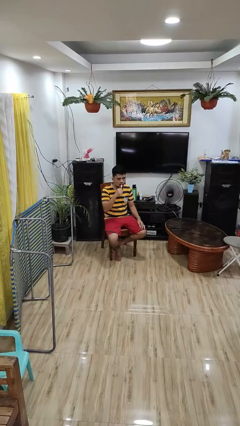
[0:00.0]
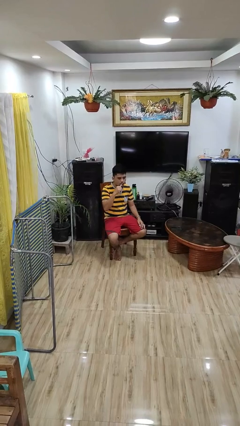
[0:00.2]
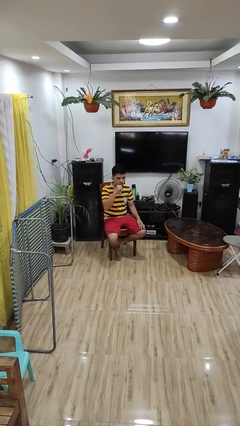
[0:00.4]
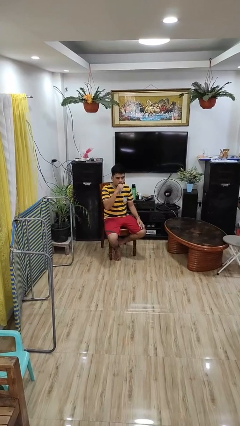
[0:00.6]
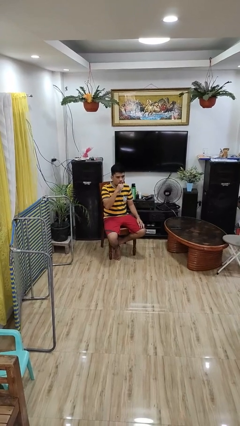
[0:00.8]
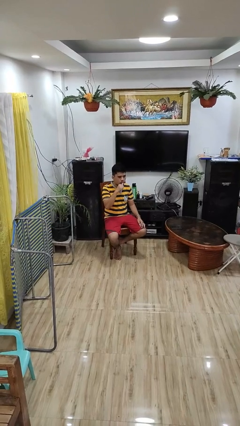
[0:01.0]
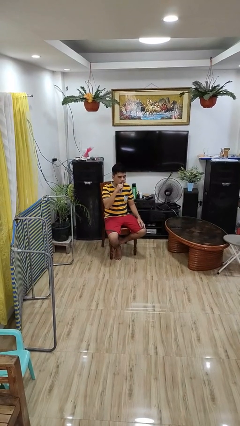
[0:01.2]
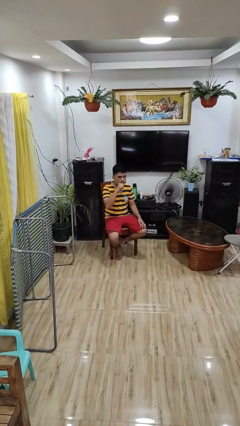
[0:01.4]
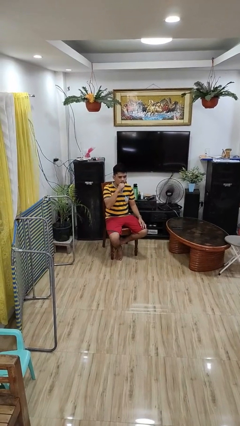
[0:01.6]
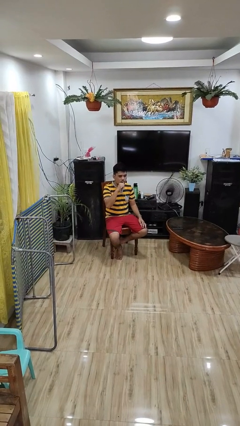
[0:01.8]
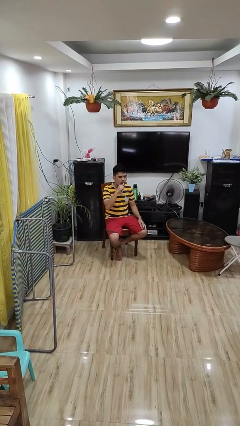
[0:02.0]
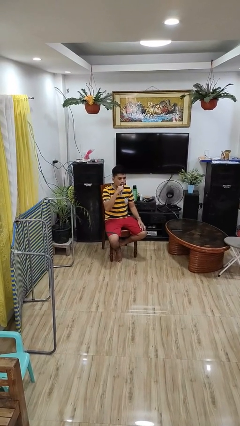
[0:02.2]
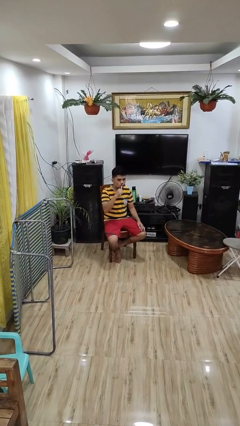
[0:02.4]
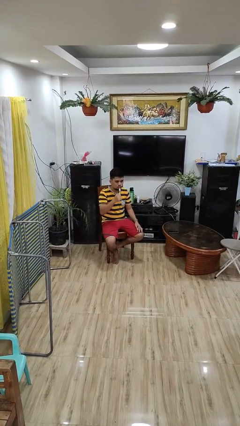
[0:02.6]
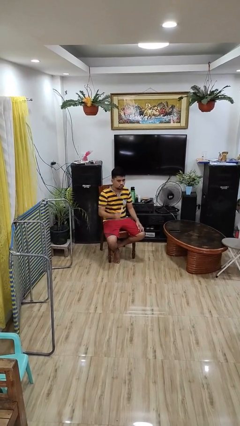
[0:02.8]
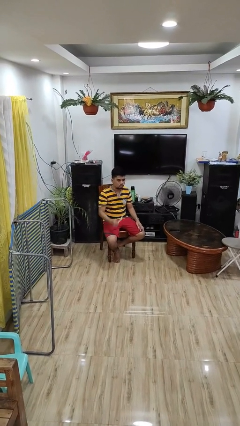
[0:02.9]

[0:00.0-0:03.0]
person brushes teeth

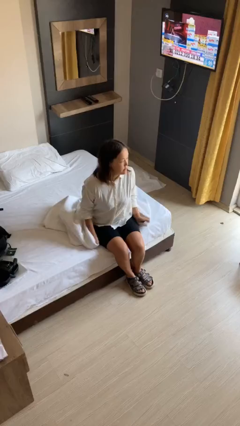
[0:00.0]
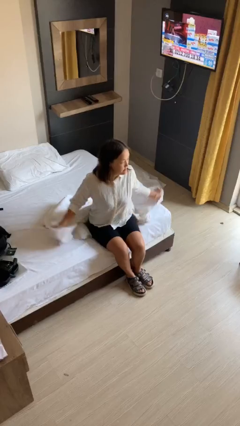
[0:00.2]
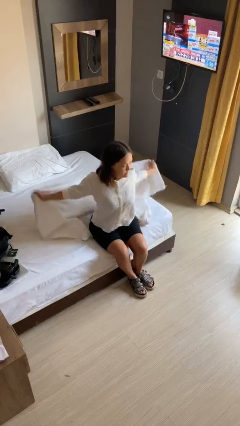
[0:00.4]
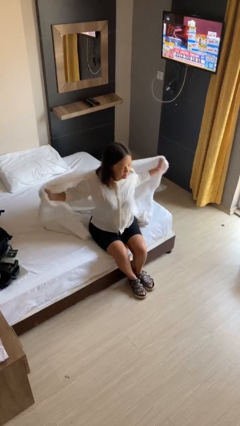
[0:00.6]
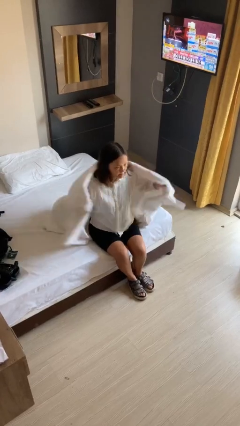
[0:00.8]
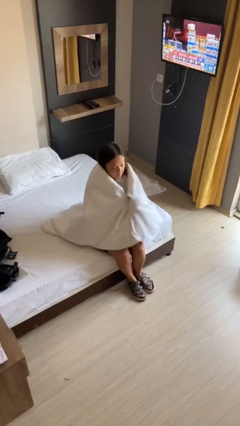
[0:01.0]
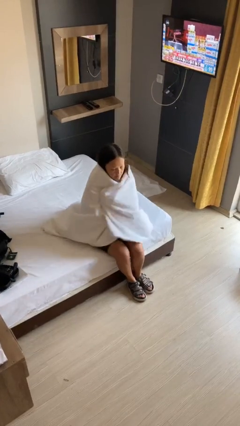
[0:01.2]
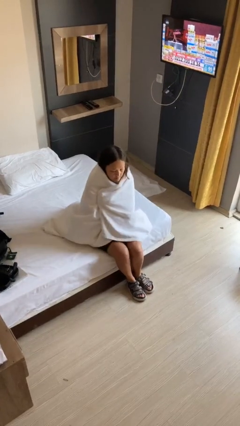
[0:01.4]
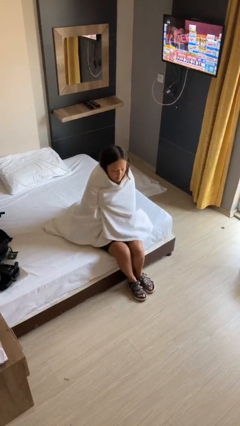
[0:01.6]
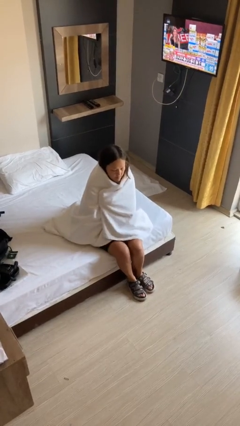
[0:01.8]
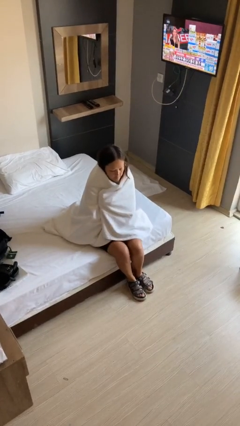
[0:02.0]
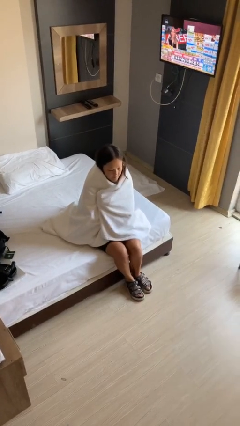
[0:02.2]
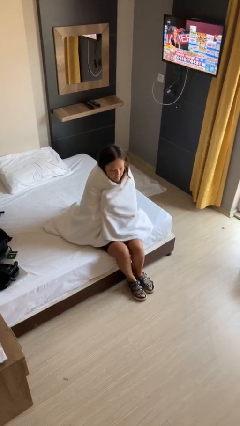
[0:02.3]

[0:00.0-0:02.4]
person covers with blanket

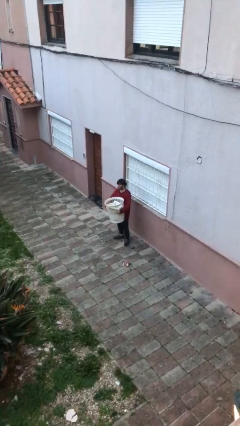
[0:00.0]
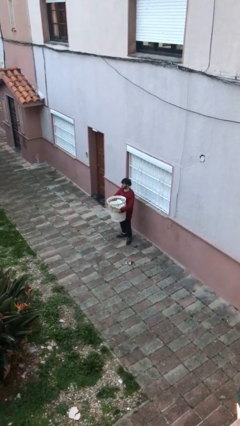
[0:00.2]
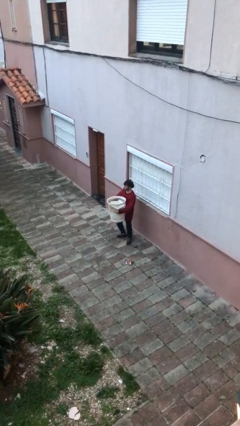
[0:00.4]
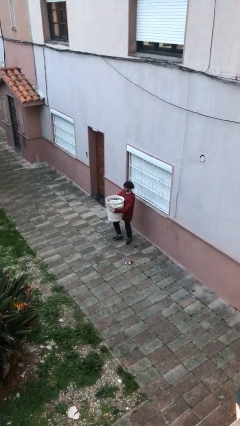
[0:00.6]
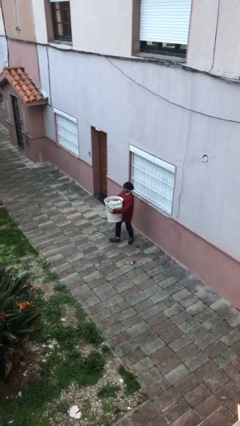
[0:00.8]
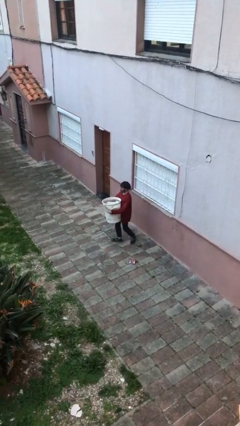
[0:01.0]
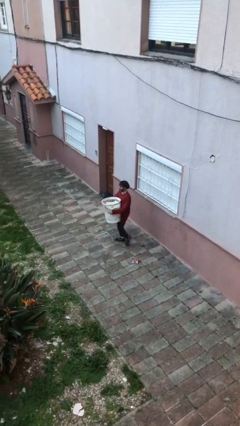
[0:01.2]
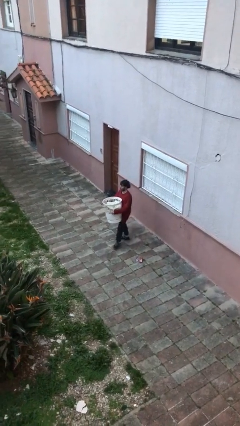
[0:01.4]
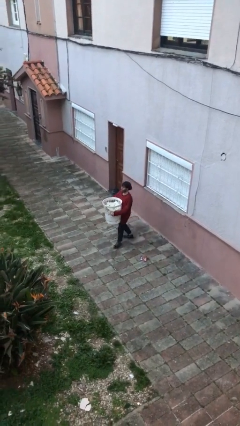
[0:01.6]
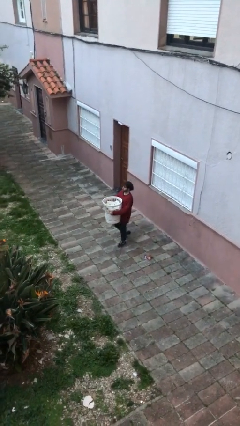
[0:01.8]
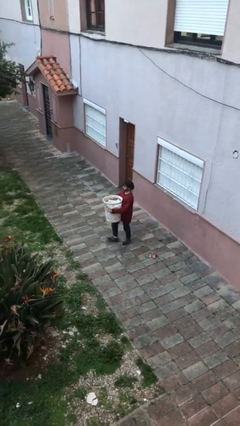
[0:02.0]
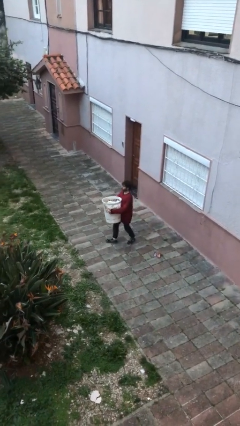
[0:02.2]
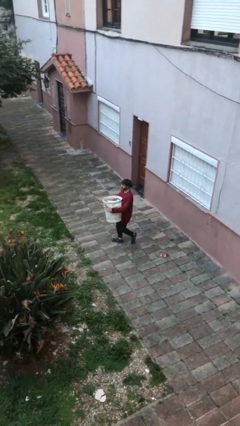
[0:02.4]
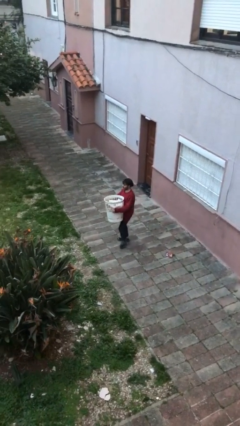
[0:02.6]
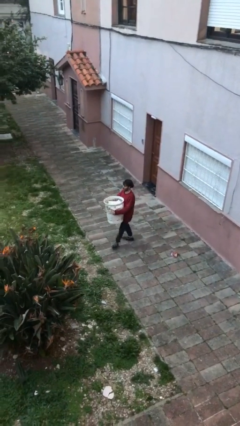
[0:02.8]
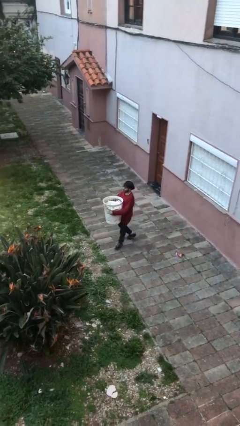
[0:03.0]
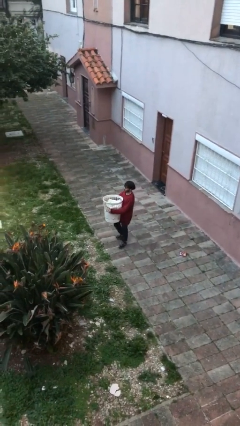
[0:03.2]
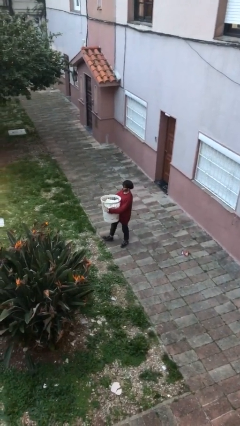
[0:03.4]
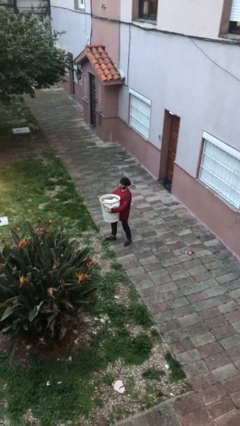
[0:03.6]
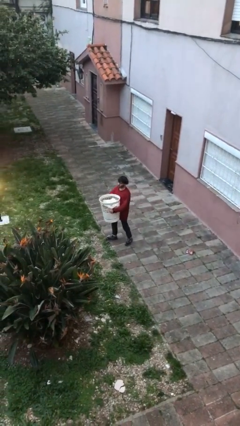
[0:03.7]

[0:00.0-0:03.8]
person carries laundry basket

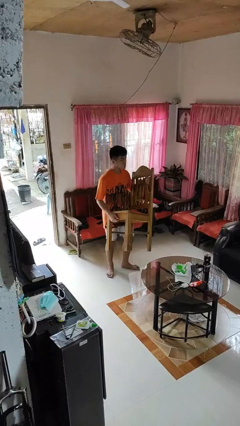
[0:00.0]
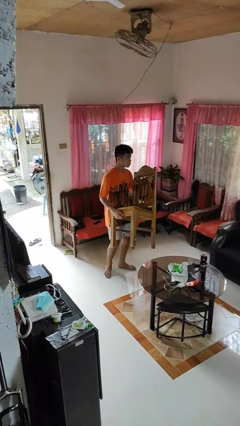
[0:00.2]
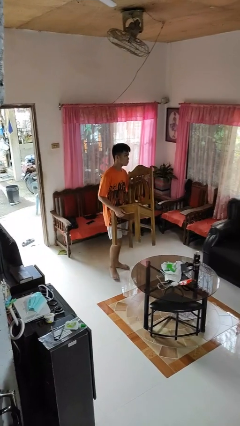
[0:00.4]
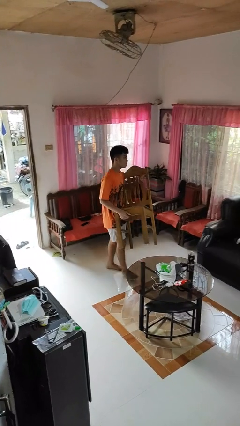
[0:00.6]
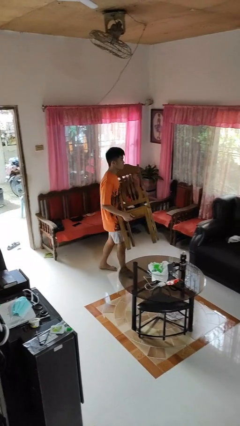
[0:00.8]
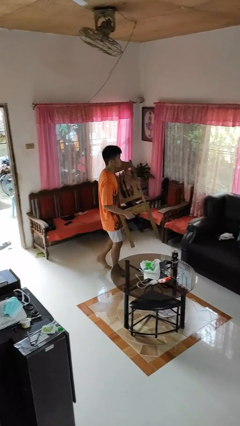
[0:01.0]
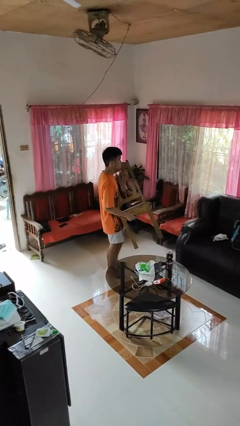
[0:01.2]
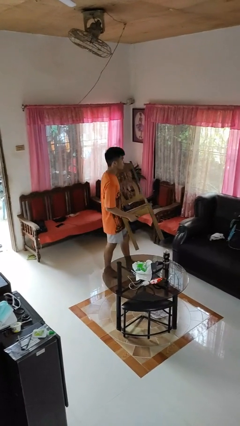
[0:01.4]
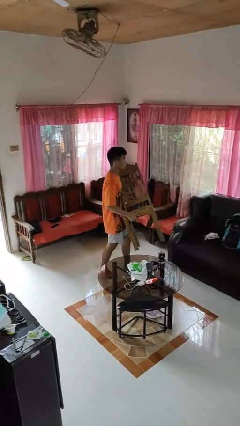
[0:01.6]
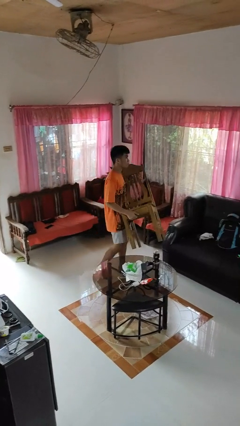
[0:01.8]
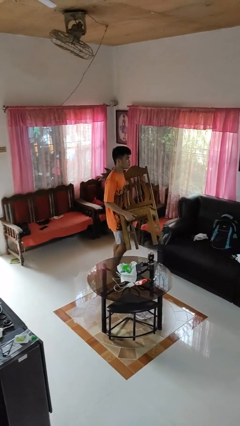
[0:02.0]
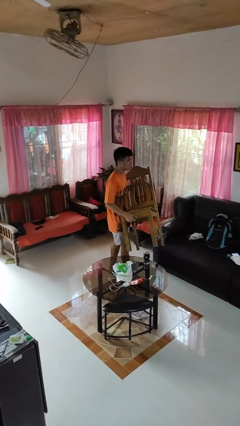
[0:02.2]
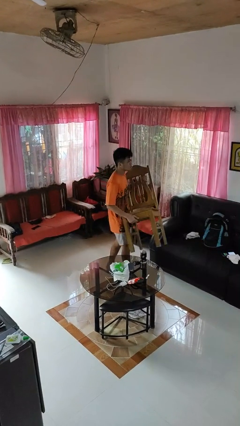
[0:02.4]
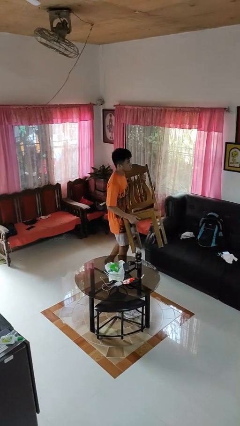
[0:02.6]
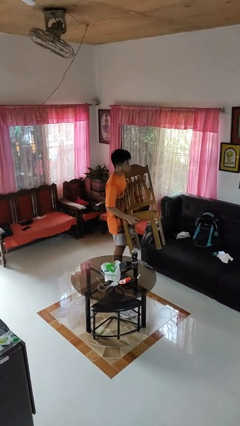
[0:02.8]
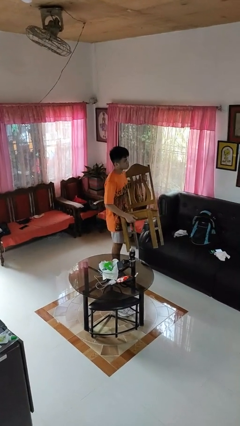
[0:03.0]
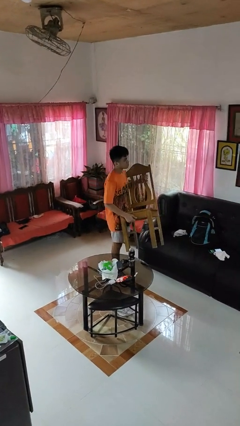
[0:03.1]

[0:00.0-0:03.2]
person carries furniture

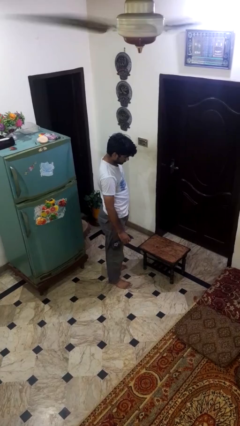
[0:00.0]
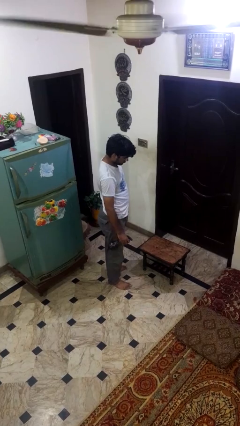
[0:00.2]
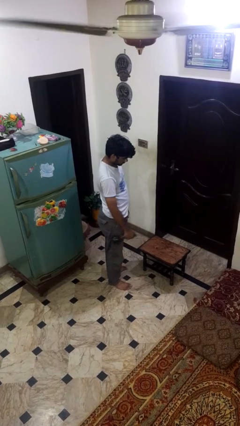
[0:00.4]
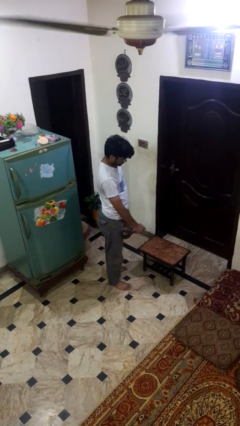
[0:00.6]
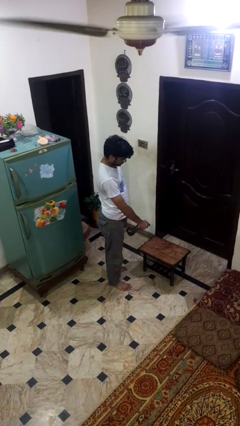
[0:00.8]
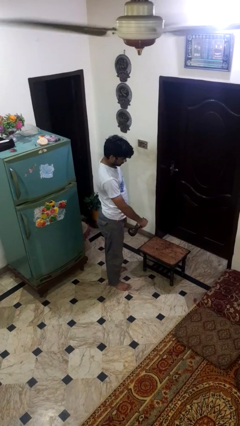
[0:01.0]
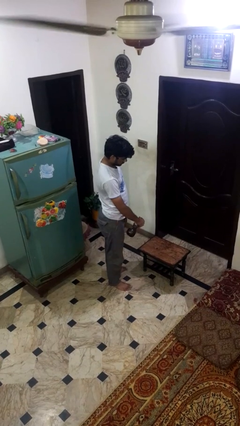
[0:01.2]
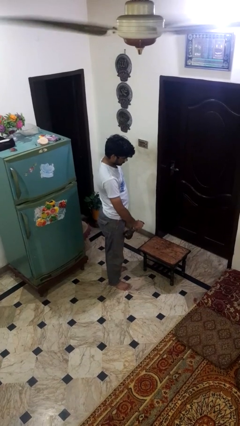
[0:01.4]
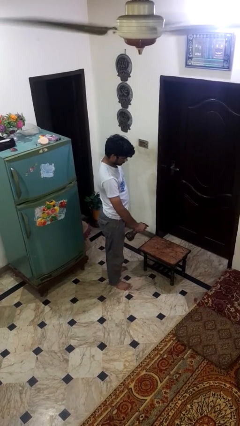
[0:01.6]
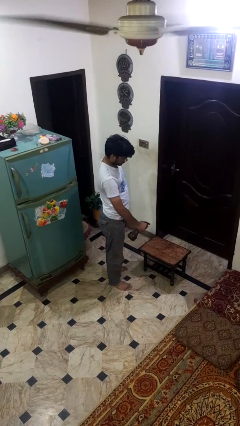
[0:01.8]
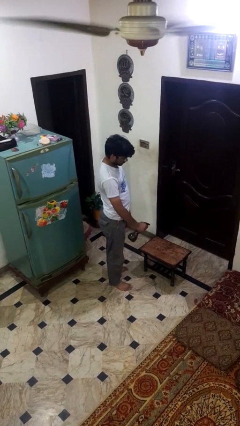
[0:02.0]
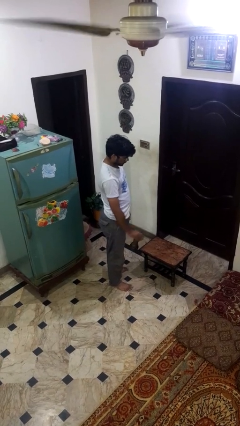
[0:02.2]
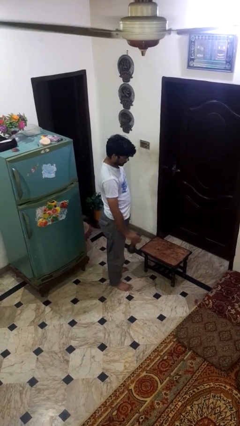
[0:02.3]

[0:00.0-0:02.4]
person sprays from bottle

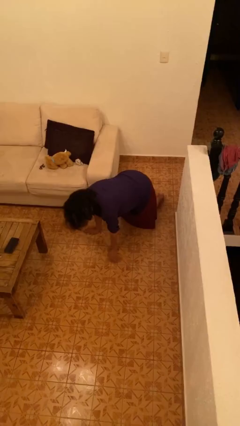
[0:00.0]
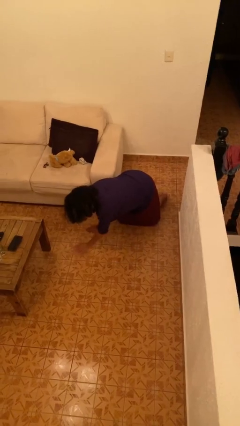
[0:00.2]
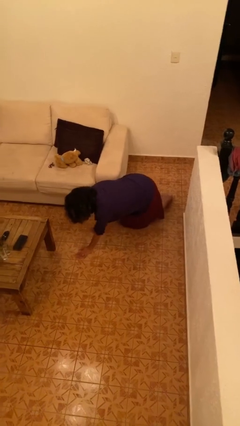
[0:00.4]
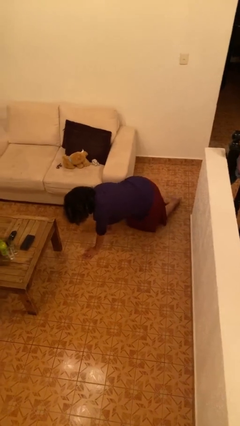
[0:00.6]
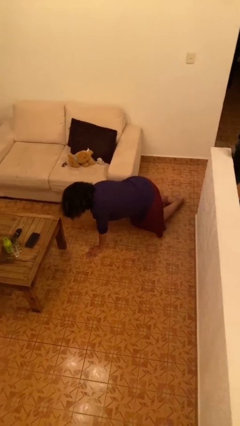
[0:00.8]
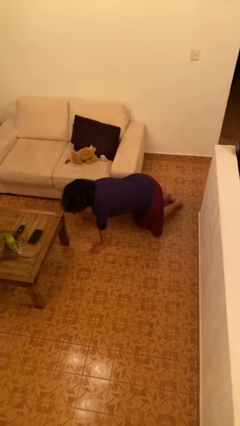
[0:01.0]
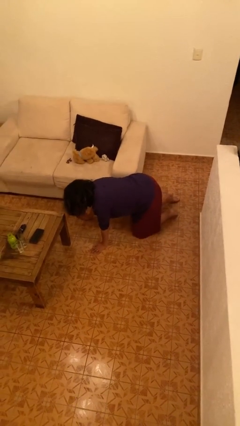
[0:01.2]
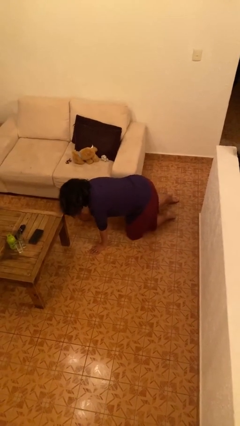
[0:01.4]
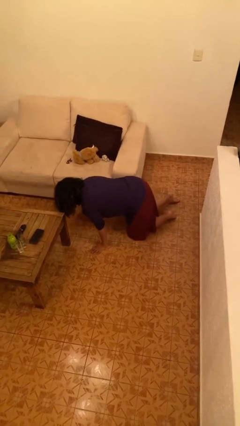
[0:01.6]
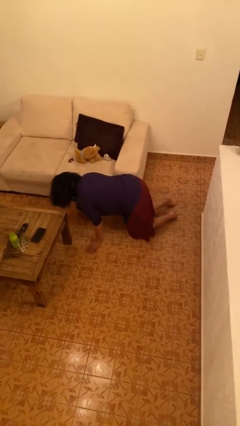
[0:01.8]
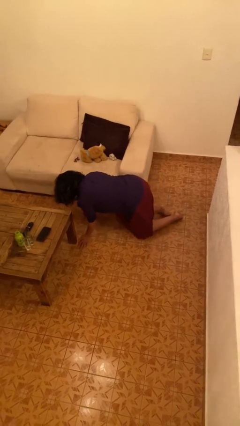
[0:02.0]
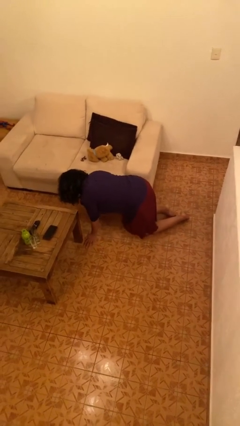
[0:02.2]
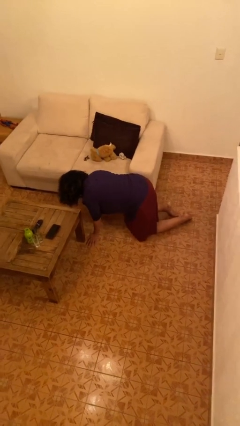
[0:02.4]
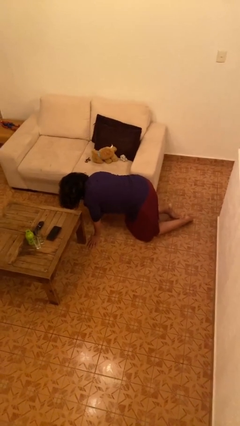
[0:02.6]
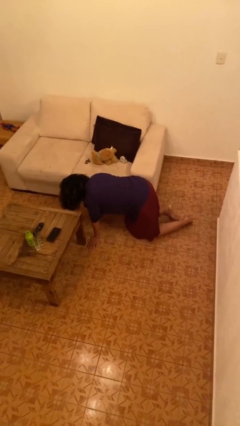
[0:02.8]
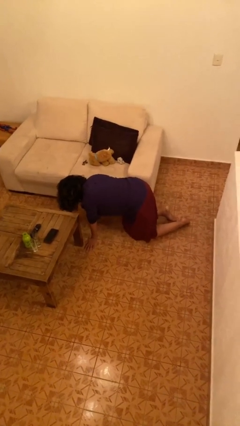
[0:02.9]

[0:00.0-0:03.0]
person crawls

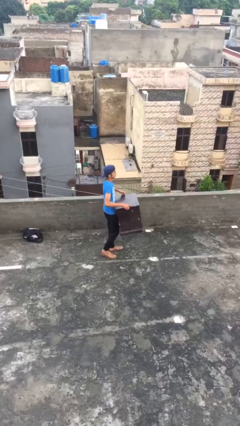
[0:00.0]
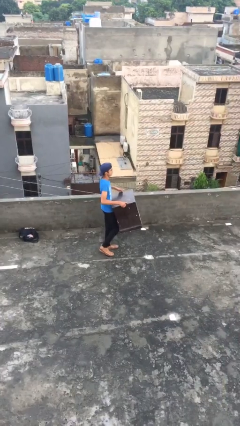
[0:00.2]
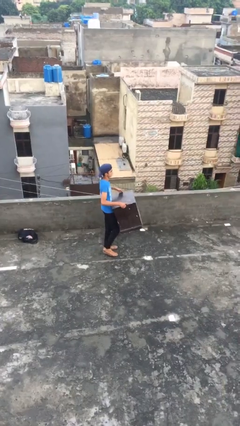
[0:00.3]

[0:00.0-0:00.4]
person puts down object on floor
